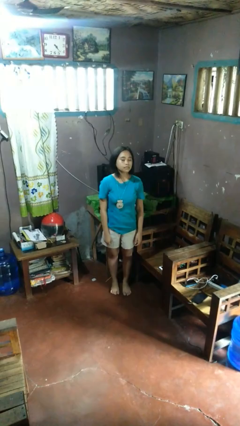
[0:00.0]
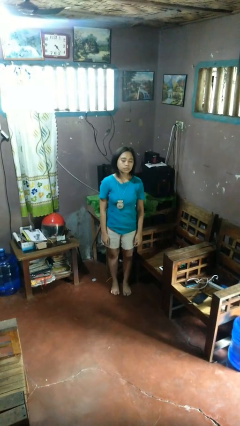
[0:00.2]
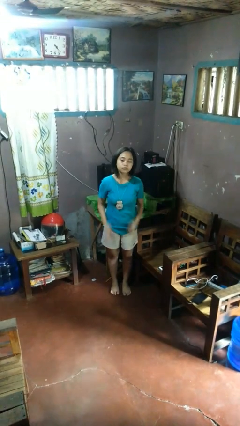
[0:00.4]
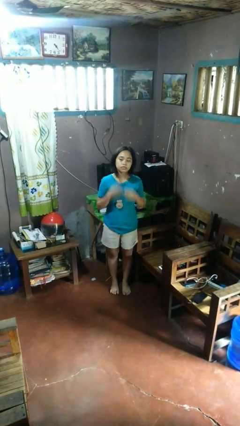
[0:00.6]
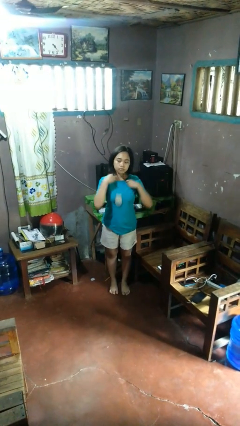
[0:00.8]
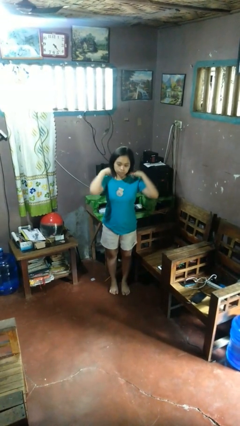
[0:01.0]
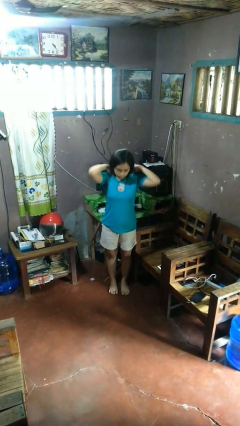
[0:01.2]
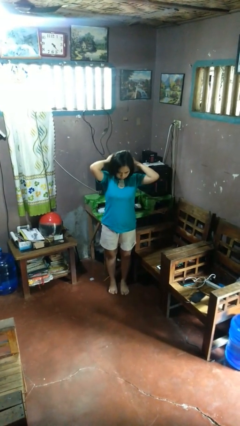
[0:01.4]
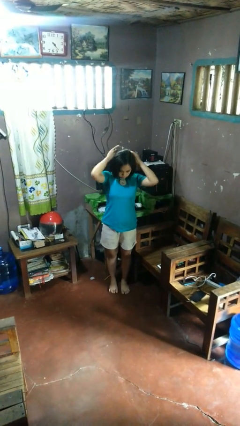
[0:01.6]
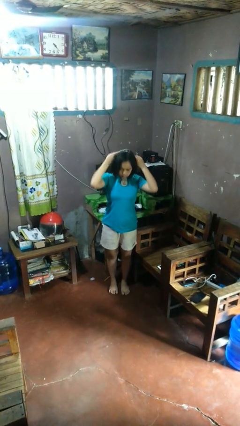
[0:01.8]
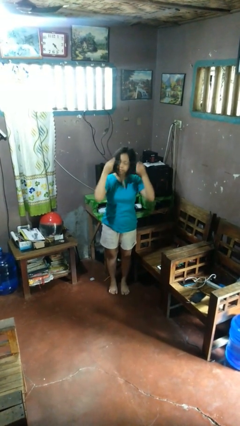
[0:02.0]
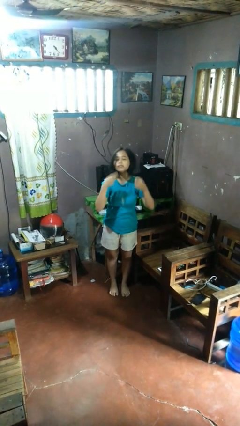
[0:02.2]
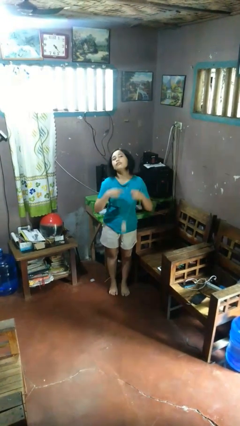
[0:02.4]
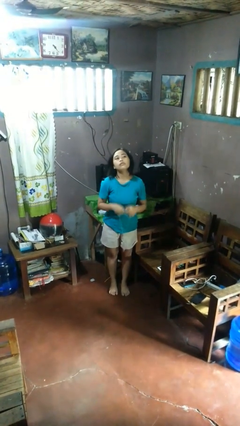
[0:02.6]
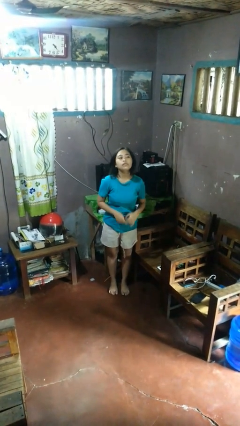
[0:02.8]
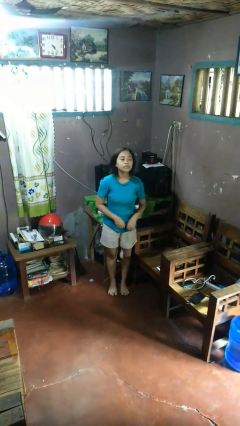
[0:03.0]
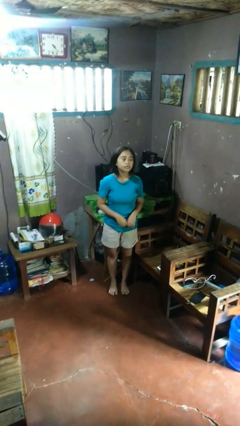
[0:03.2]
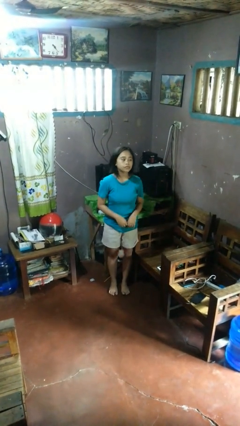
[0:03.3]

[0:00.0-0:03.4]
person takes off necklace

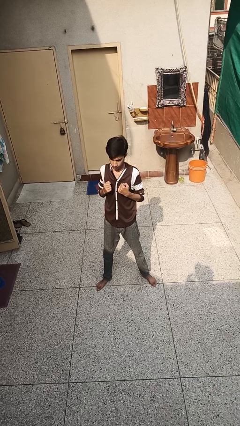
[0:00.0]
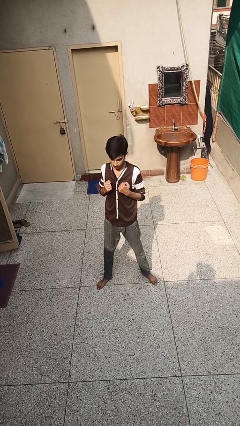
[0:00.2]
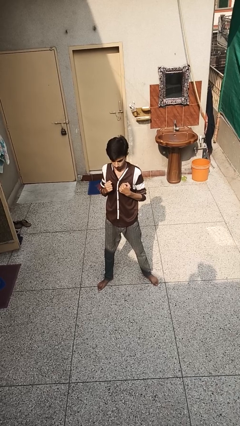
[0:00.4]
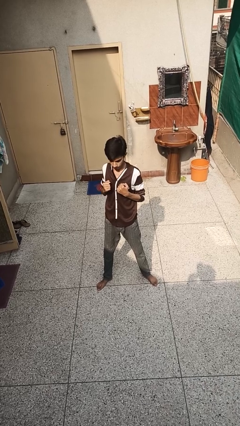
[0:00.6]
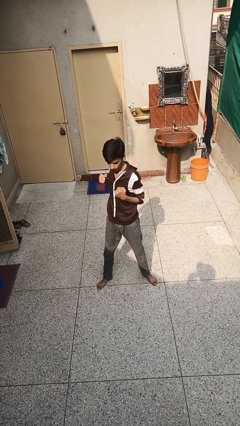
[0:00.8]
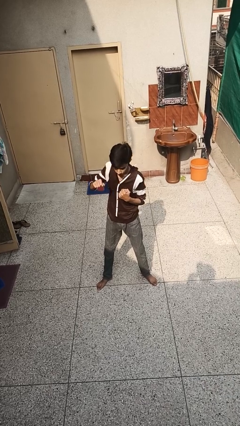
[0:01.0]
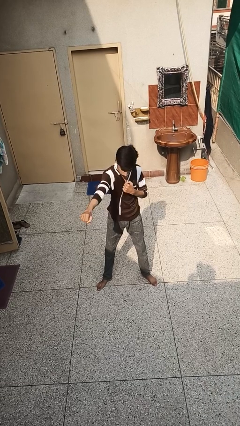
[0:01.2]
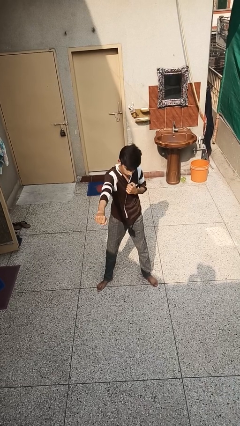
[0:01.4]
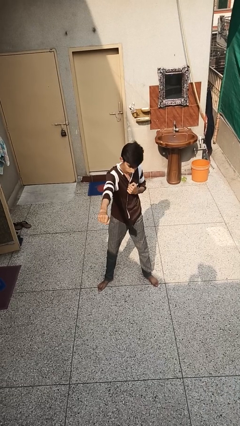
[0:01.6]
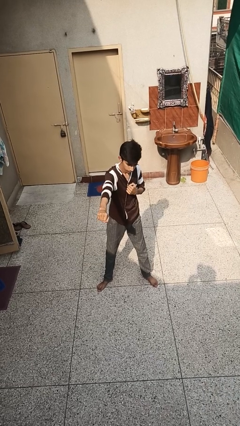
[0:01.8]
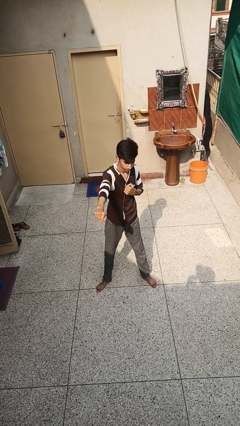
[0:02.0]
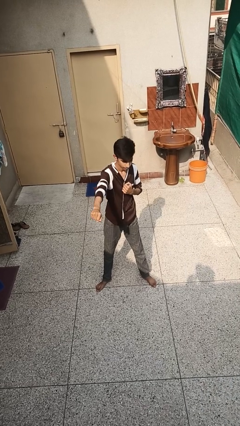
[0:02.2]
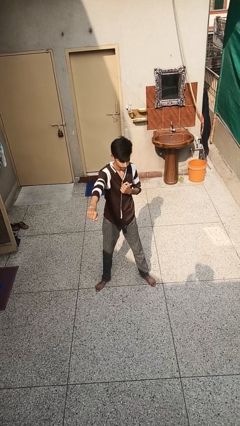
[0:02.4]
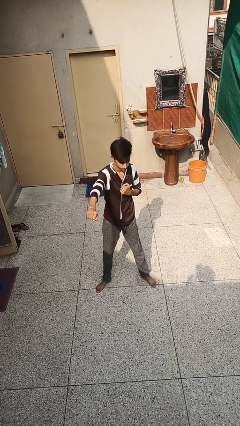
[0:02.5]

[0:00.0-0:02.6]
person punches

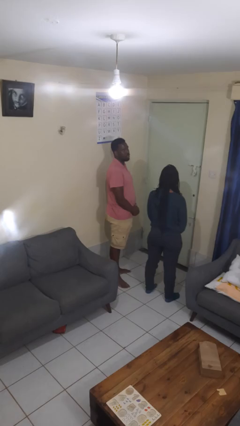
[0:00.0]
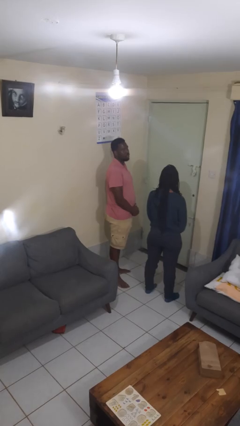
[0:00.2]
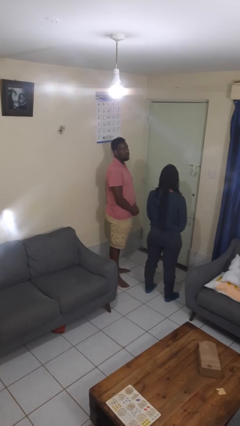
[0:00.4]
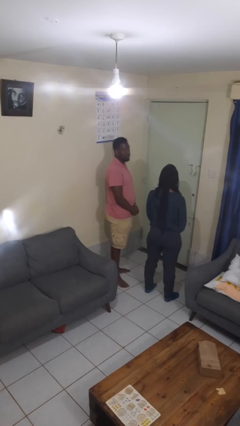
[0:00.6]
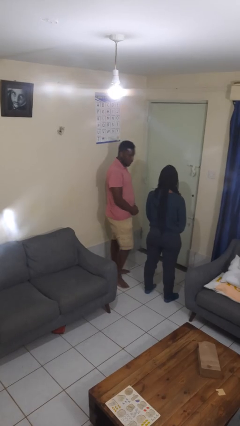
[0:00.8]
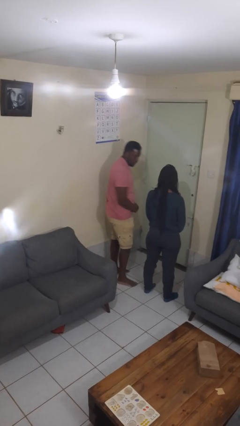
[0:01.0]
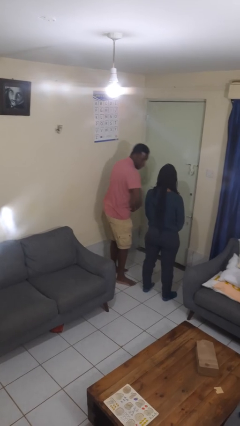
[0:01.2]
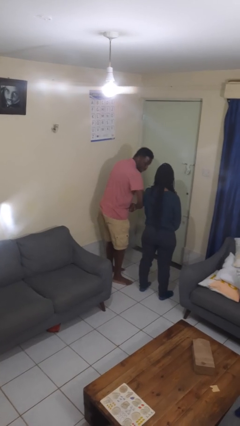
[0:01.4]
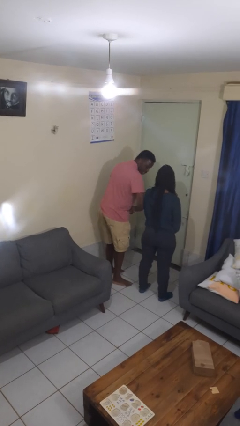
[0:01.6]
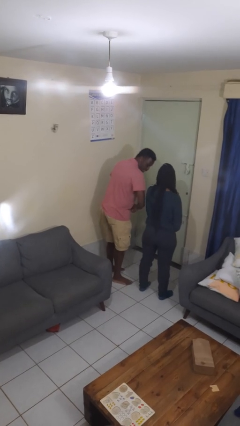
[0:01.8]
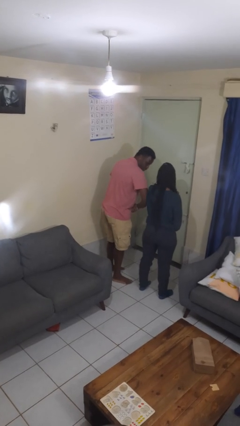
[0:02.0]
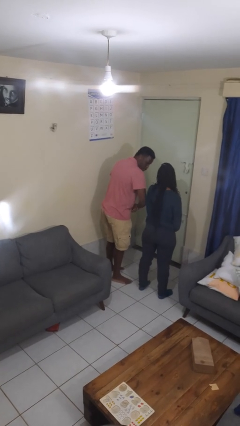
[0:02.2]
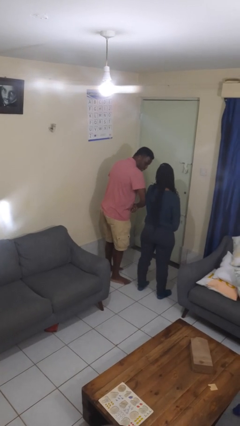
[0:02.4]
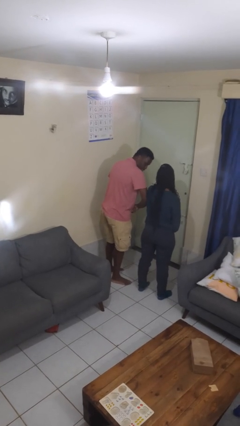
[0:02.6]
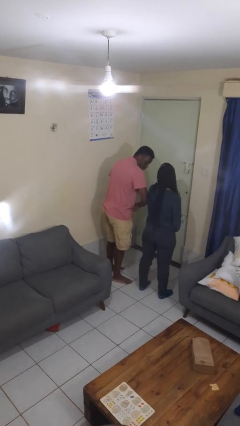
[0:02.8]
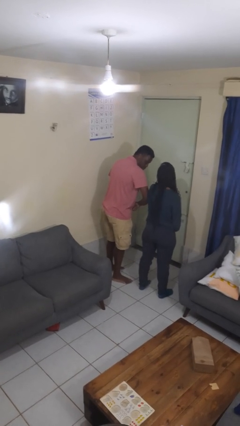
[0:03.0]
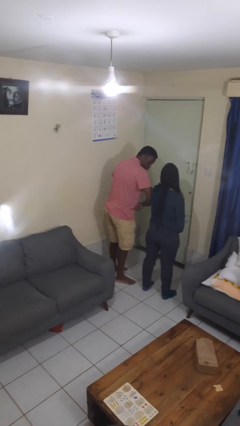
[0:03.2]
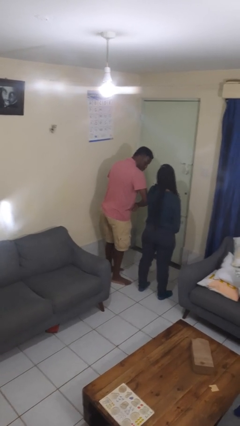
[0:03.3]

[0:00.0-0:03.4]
person nudges person with elbow

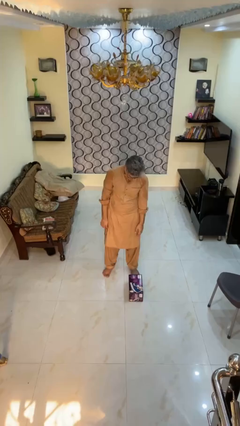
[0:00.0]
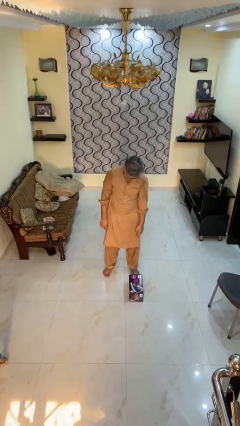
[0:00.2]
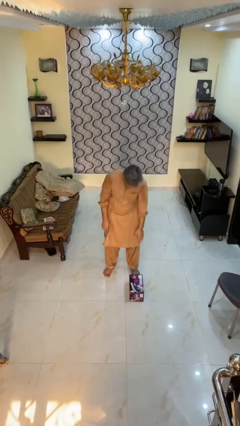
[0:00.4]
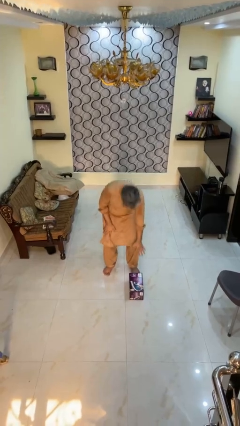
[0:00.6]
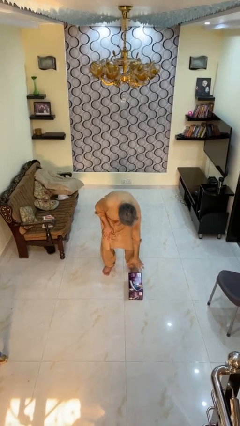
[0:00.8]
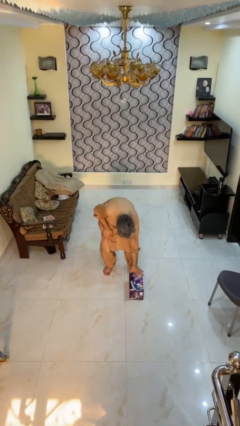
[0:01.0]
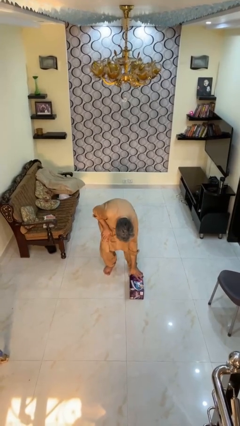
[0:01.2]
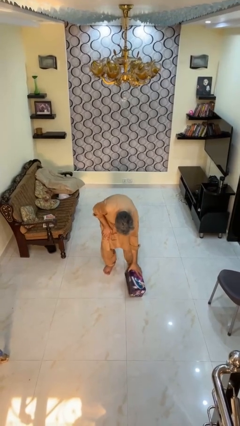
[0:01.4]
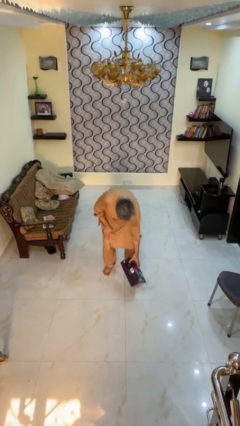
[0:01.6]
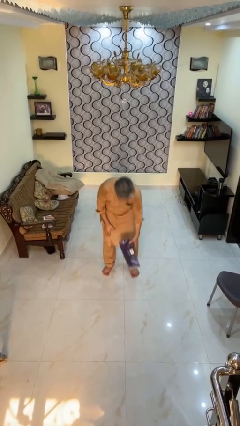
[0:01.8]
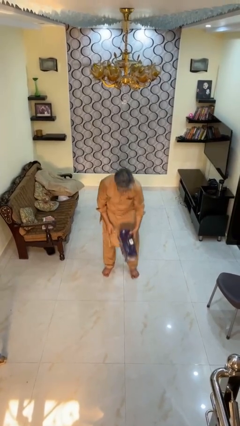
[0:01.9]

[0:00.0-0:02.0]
person picks up object from floor

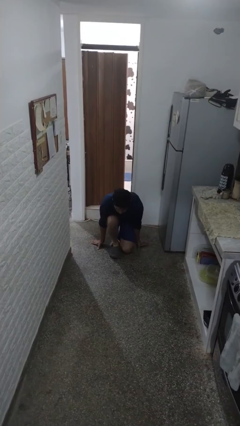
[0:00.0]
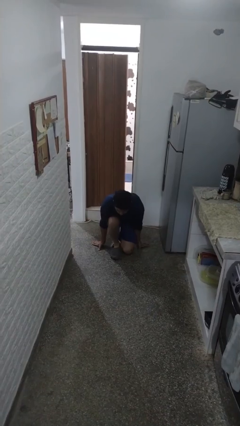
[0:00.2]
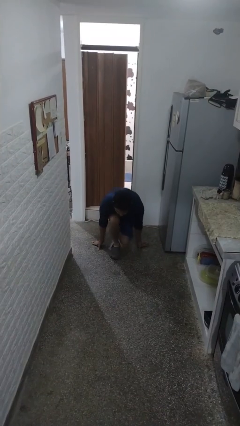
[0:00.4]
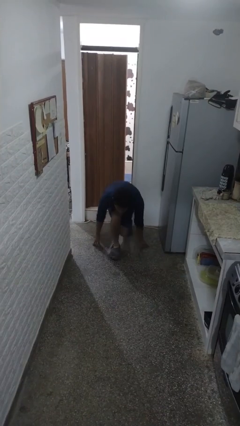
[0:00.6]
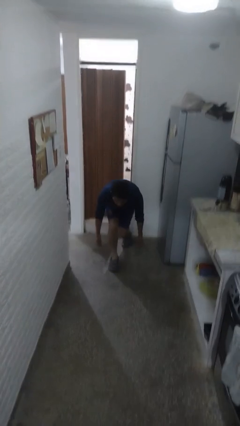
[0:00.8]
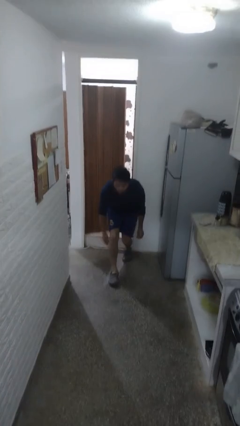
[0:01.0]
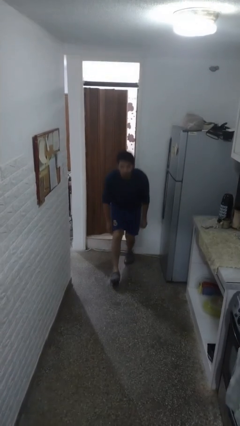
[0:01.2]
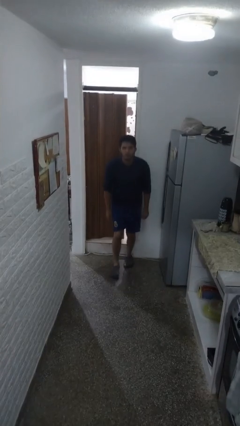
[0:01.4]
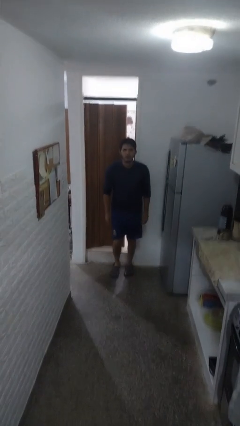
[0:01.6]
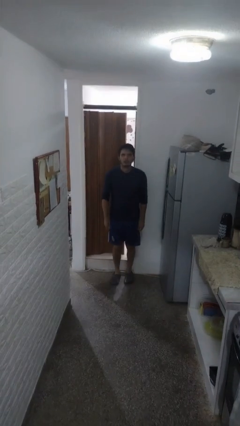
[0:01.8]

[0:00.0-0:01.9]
person stands up from floor

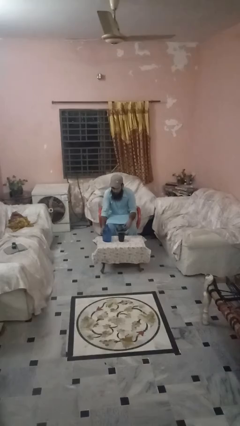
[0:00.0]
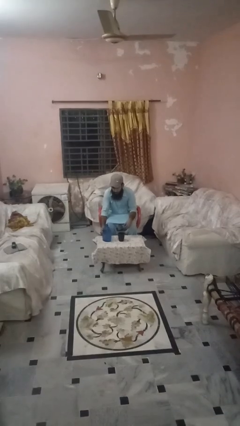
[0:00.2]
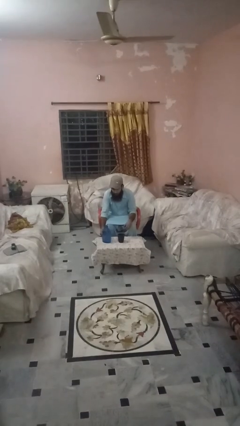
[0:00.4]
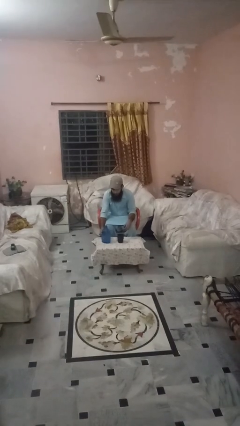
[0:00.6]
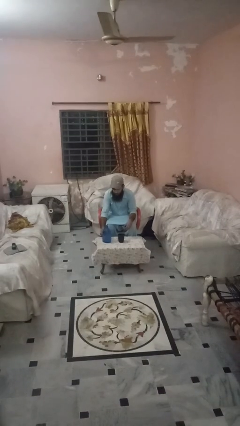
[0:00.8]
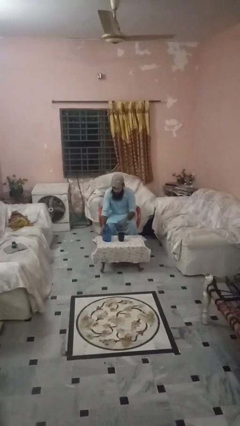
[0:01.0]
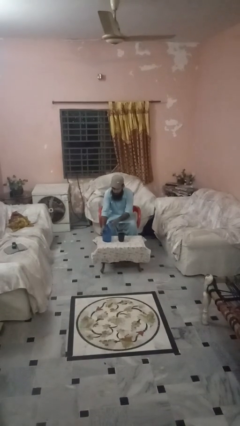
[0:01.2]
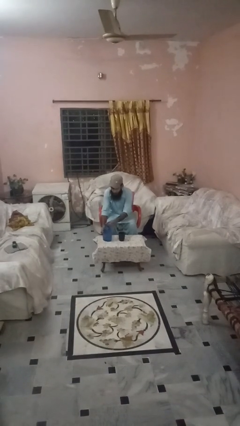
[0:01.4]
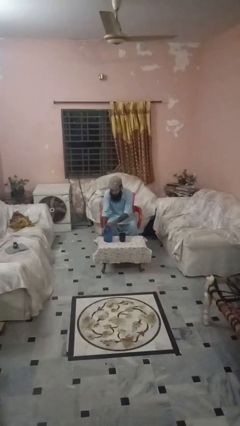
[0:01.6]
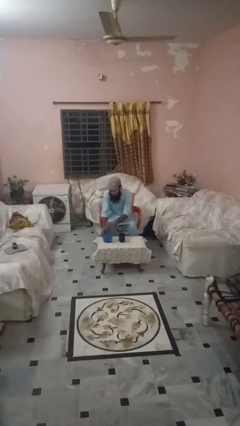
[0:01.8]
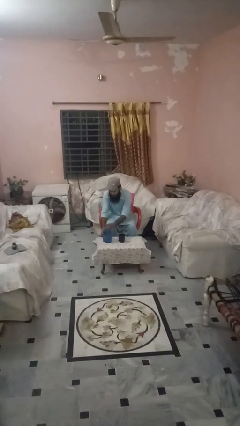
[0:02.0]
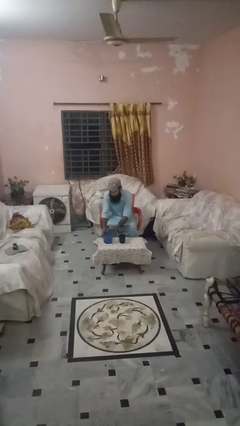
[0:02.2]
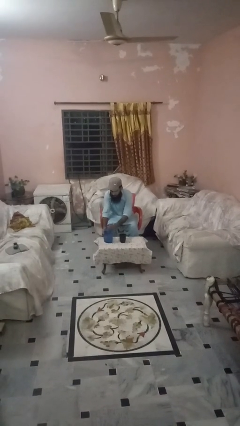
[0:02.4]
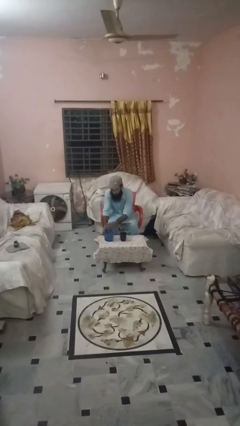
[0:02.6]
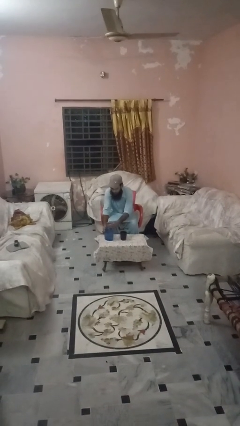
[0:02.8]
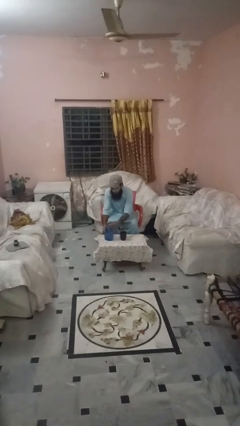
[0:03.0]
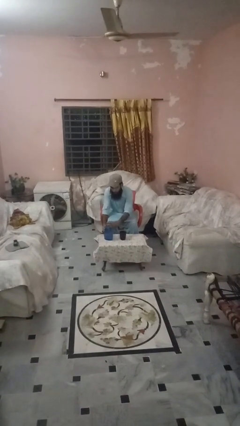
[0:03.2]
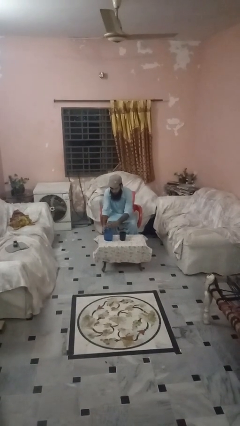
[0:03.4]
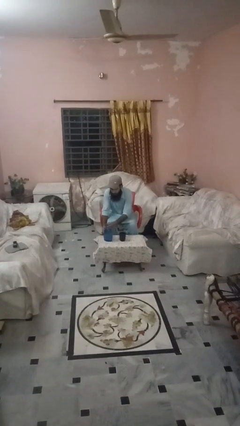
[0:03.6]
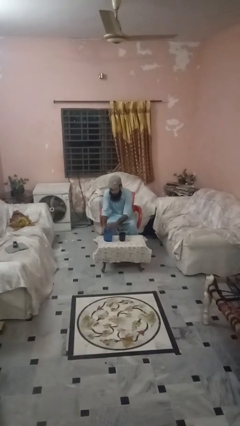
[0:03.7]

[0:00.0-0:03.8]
person screws lid to bottle

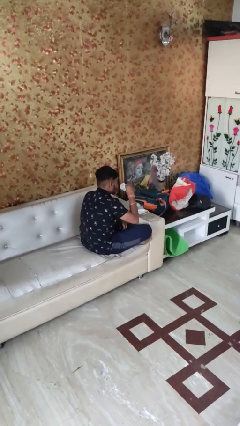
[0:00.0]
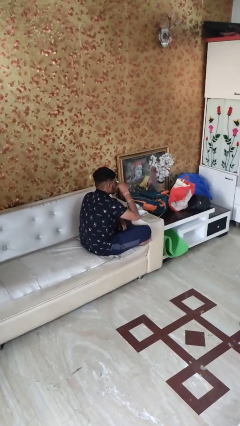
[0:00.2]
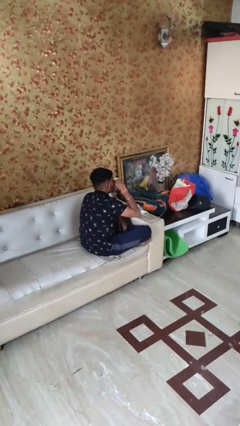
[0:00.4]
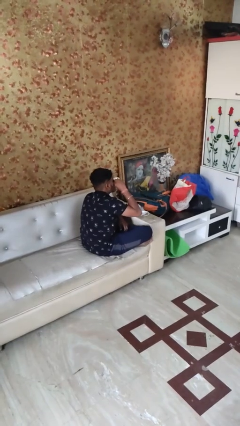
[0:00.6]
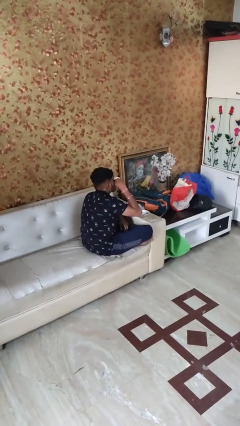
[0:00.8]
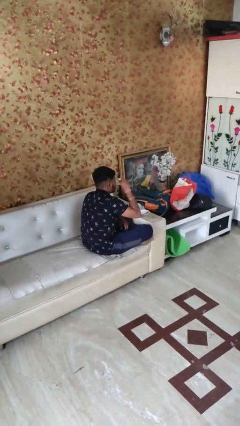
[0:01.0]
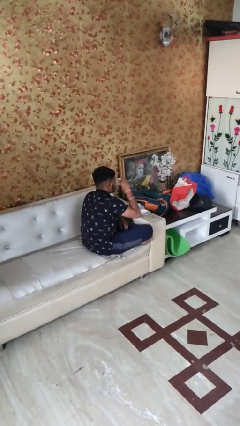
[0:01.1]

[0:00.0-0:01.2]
person drinks from mug
